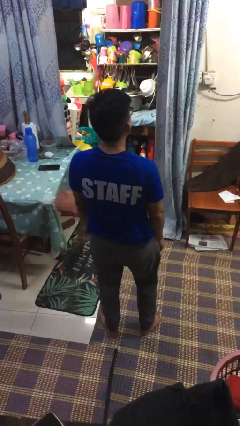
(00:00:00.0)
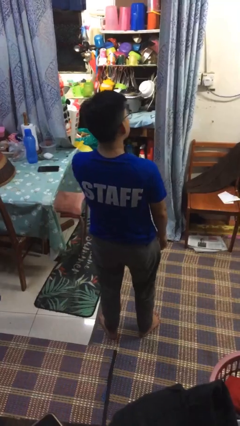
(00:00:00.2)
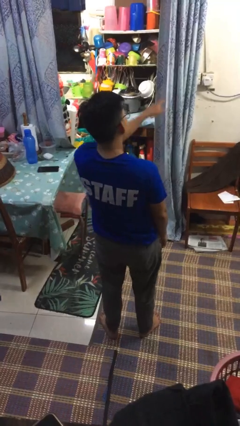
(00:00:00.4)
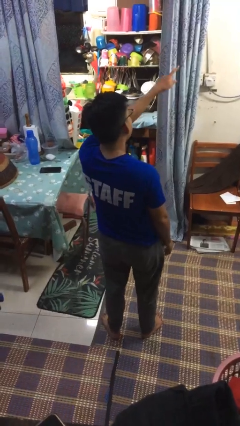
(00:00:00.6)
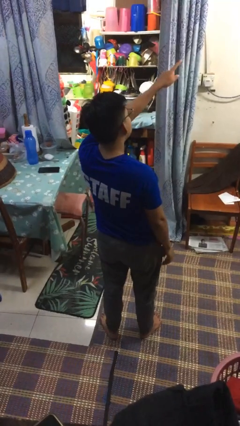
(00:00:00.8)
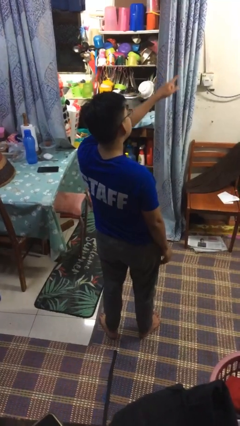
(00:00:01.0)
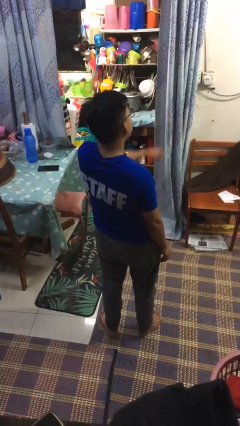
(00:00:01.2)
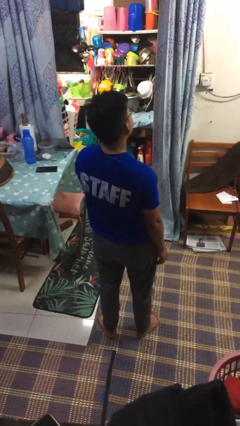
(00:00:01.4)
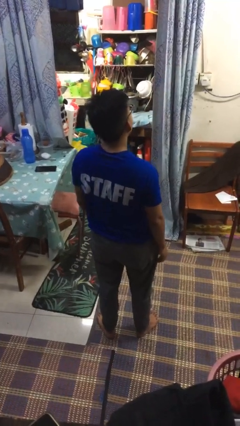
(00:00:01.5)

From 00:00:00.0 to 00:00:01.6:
person points at person

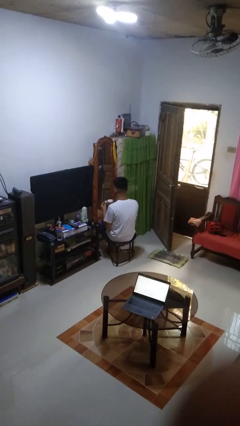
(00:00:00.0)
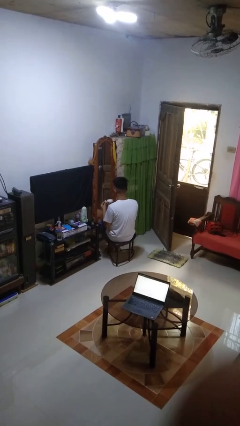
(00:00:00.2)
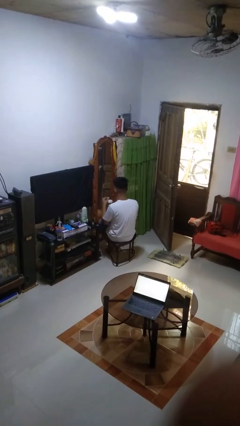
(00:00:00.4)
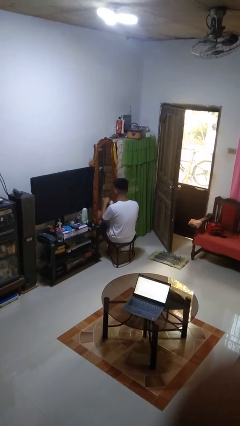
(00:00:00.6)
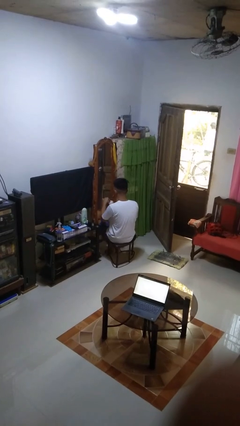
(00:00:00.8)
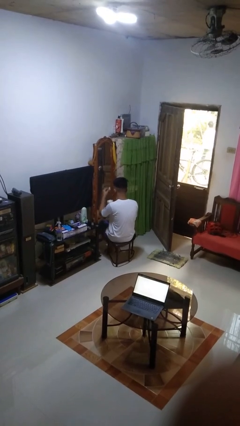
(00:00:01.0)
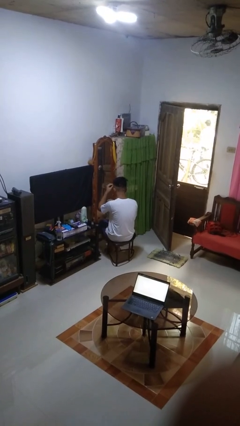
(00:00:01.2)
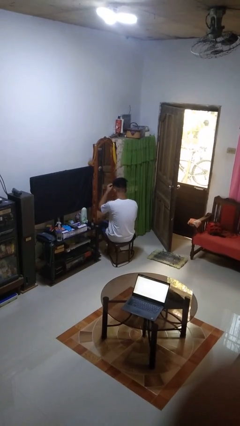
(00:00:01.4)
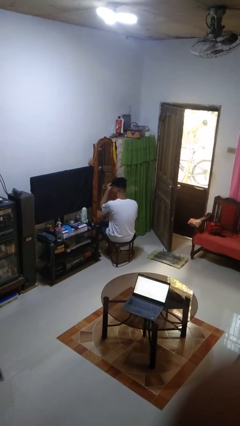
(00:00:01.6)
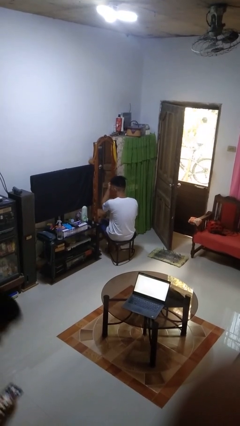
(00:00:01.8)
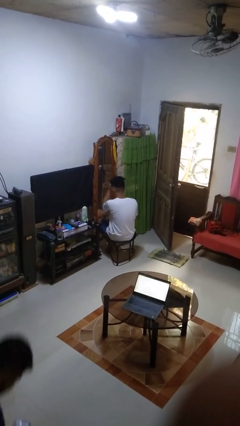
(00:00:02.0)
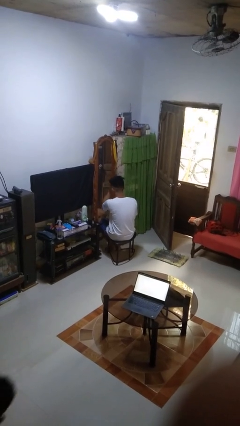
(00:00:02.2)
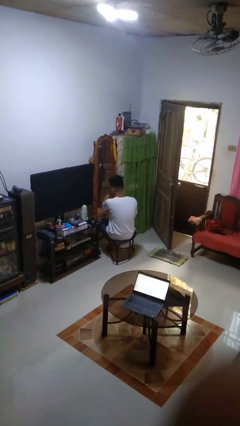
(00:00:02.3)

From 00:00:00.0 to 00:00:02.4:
person applies foundation makeup

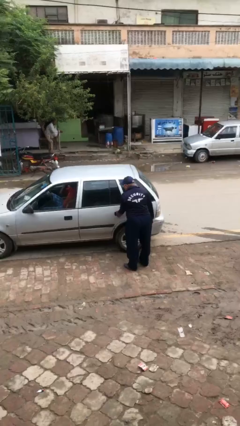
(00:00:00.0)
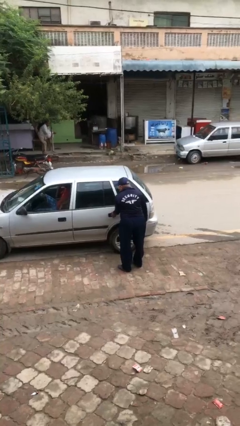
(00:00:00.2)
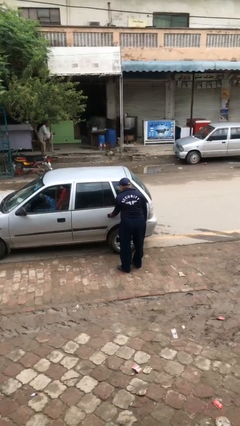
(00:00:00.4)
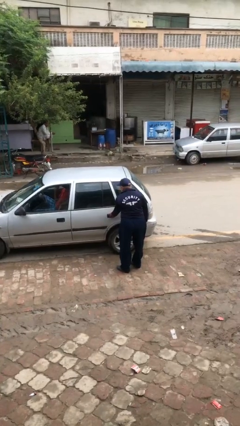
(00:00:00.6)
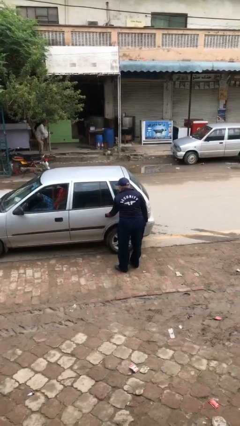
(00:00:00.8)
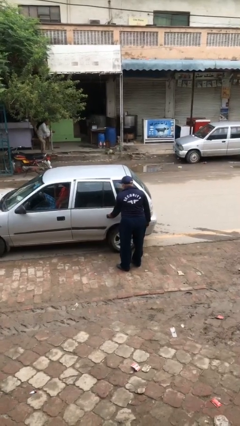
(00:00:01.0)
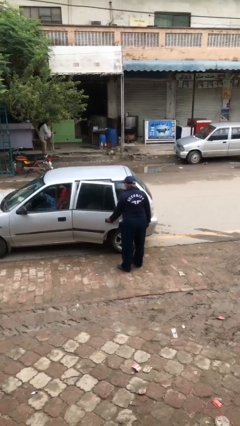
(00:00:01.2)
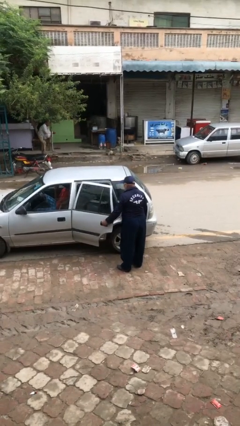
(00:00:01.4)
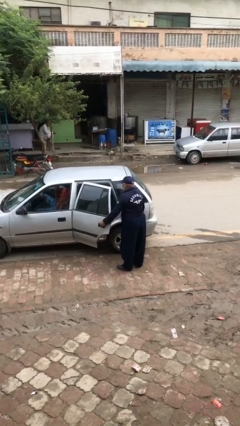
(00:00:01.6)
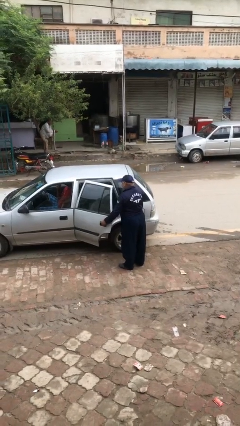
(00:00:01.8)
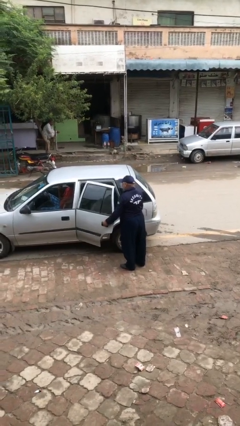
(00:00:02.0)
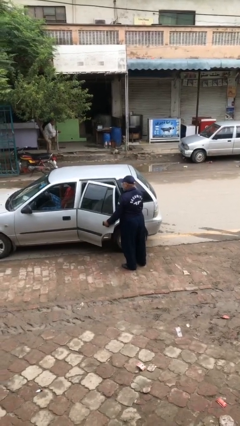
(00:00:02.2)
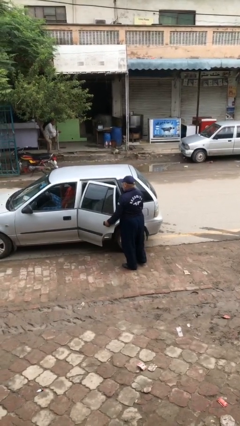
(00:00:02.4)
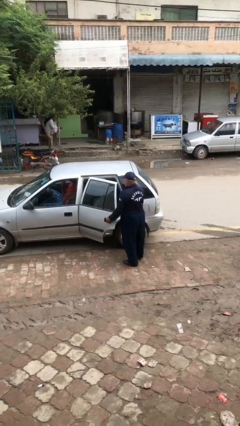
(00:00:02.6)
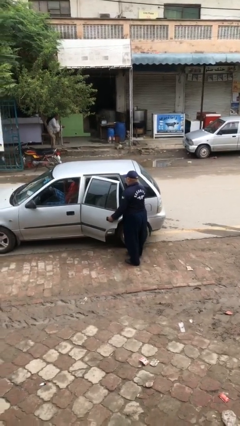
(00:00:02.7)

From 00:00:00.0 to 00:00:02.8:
person opens car door

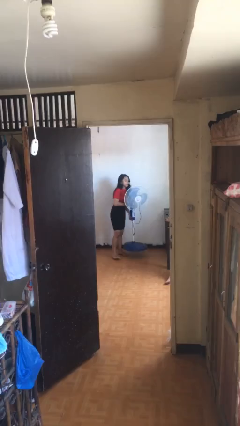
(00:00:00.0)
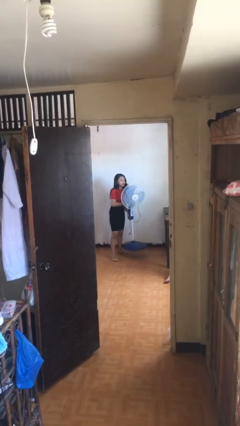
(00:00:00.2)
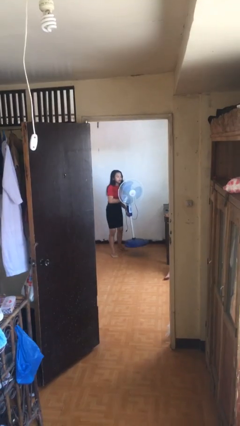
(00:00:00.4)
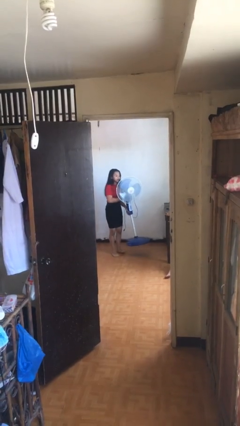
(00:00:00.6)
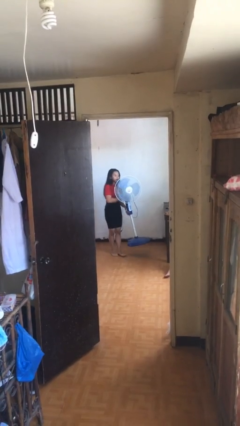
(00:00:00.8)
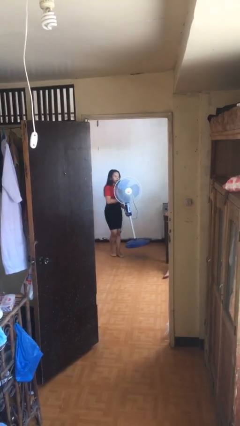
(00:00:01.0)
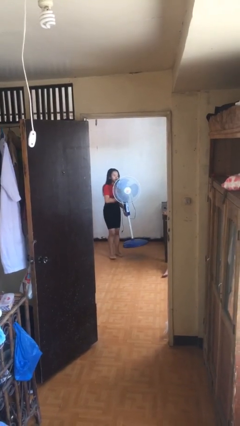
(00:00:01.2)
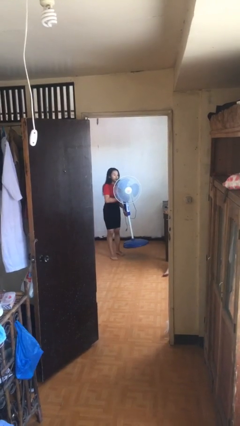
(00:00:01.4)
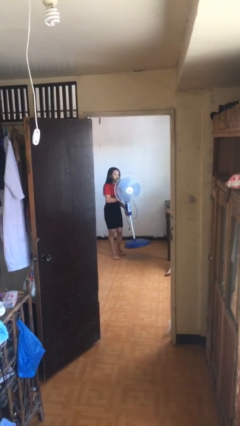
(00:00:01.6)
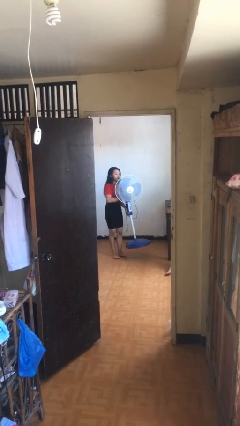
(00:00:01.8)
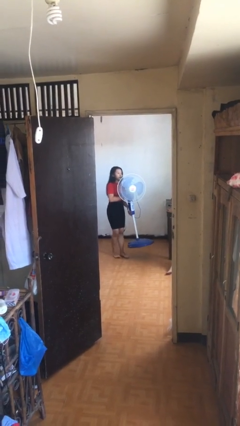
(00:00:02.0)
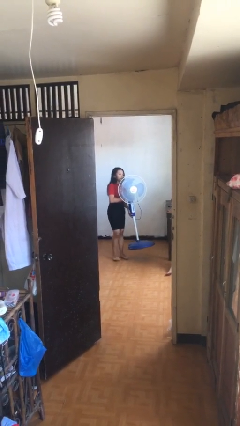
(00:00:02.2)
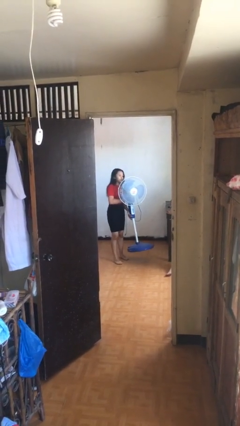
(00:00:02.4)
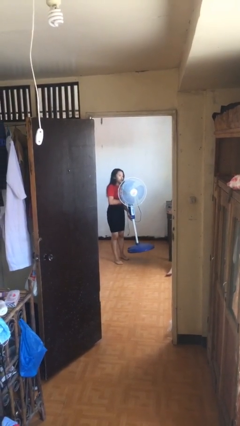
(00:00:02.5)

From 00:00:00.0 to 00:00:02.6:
person carries heavy object

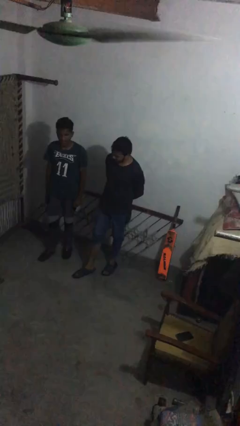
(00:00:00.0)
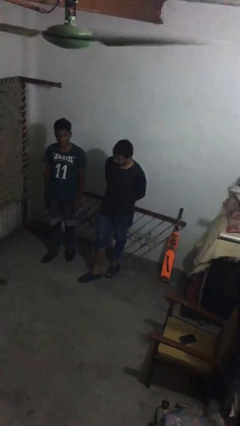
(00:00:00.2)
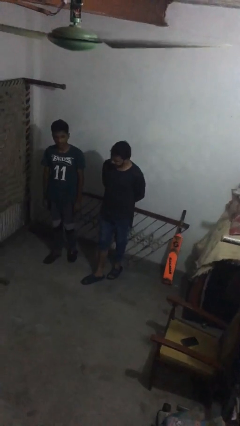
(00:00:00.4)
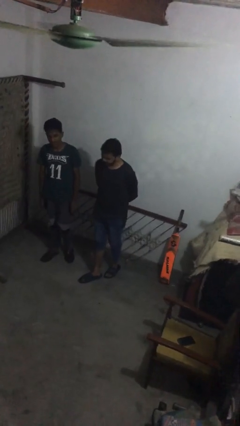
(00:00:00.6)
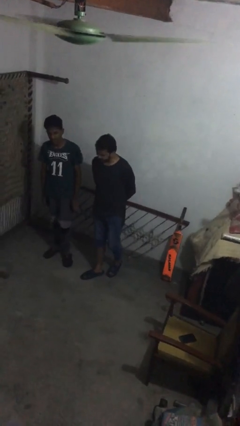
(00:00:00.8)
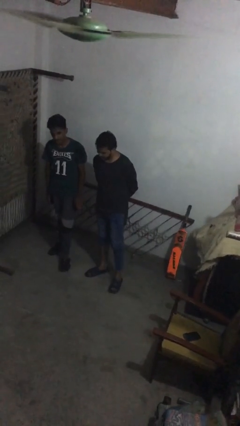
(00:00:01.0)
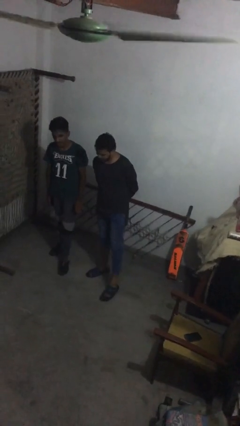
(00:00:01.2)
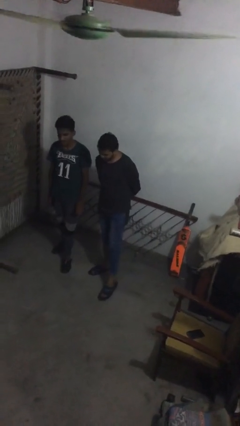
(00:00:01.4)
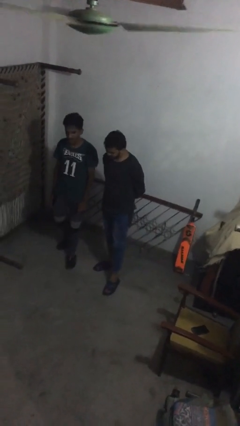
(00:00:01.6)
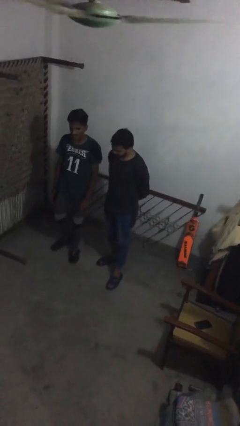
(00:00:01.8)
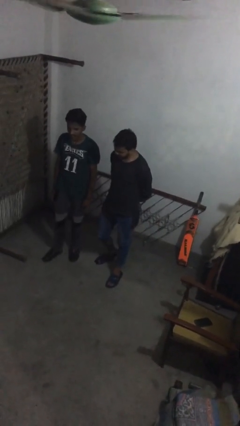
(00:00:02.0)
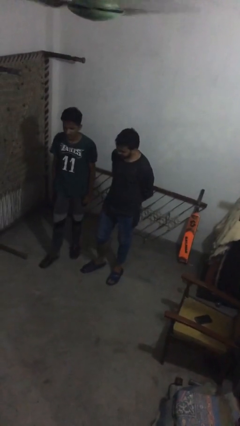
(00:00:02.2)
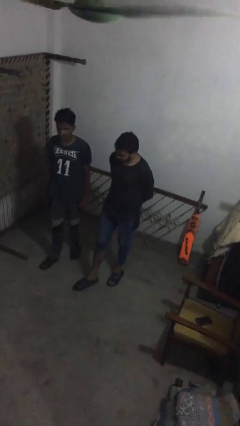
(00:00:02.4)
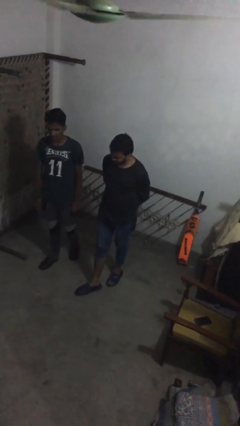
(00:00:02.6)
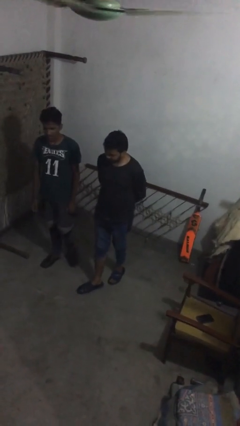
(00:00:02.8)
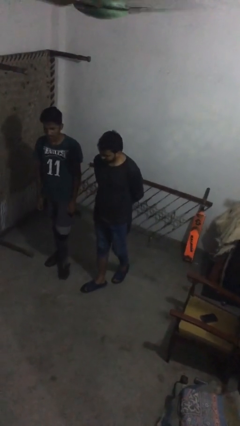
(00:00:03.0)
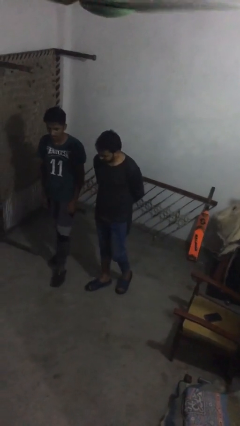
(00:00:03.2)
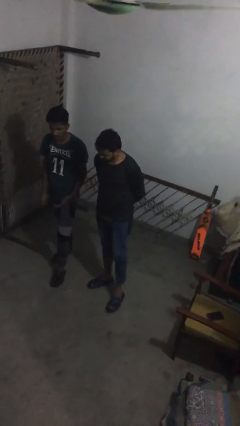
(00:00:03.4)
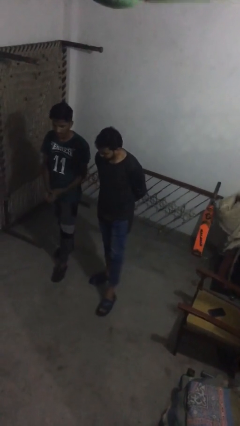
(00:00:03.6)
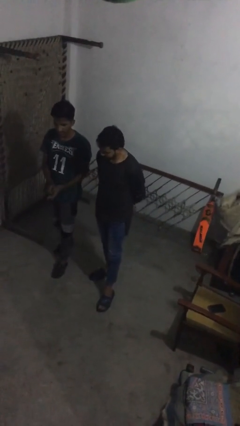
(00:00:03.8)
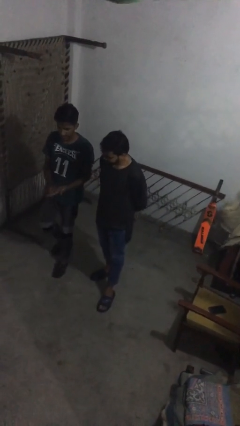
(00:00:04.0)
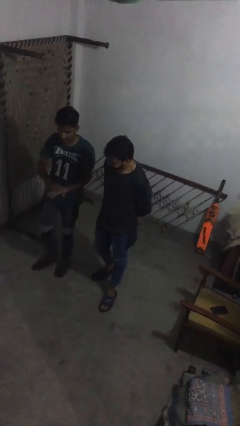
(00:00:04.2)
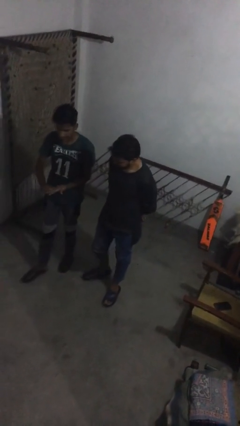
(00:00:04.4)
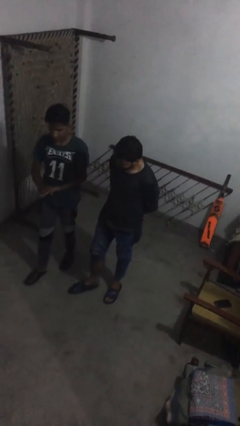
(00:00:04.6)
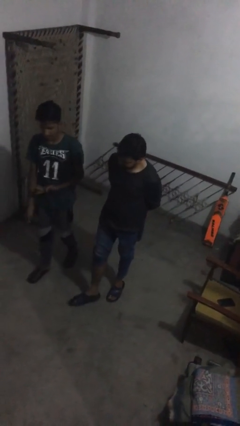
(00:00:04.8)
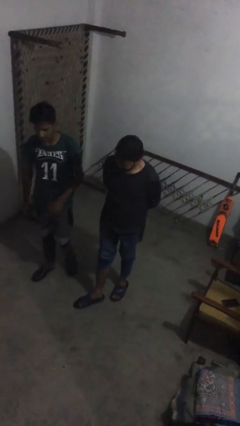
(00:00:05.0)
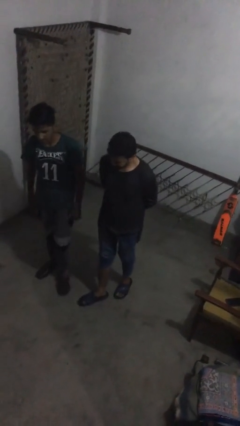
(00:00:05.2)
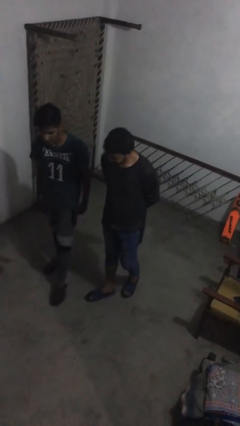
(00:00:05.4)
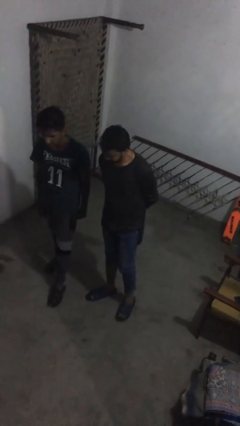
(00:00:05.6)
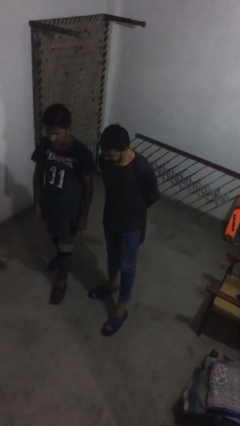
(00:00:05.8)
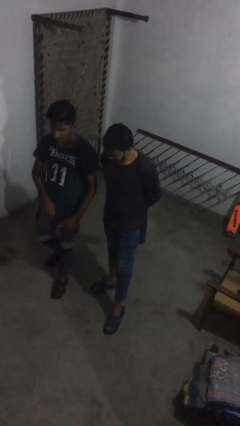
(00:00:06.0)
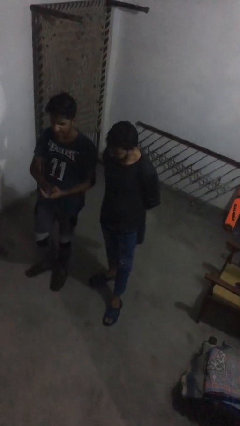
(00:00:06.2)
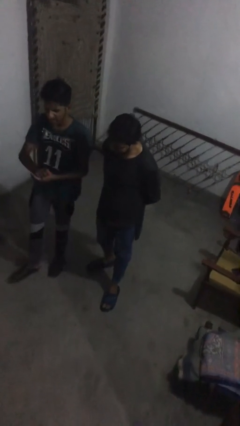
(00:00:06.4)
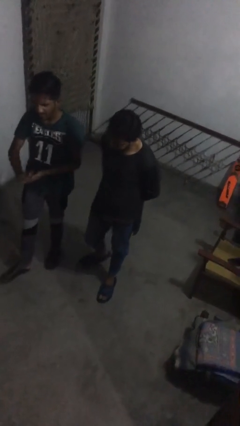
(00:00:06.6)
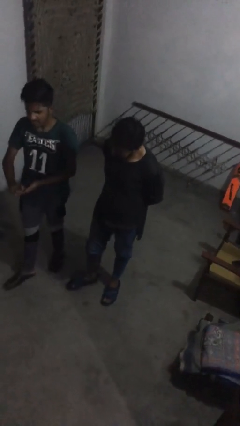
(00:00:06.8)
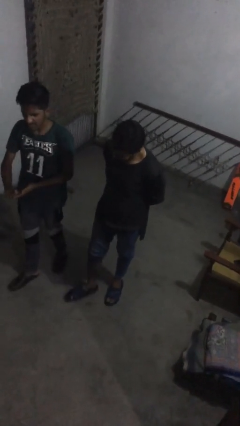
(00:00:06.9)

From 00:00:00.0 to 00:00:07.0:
person talks to person

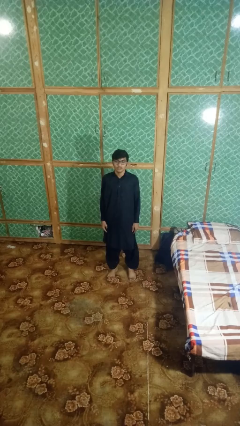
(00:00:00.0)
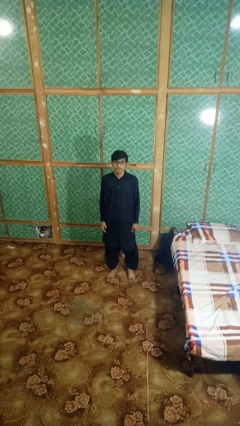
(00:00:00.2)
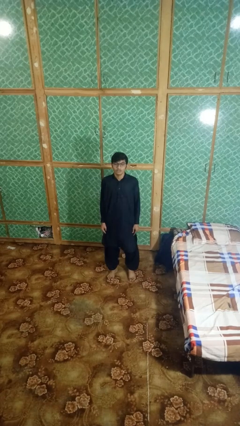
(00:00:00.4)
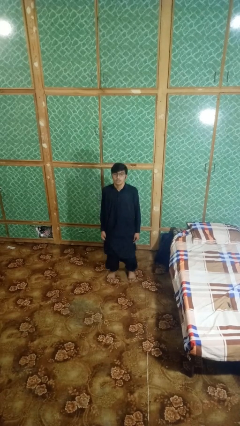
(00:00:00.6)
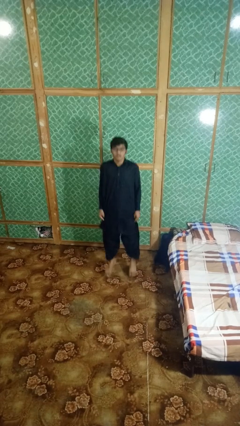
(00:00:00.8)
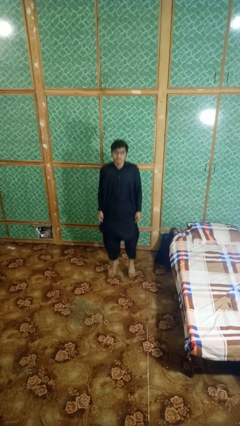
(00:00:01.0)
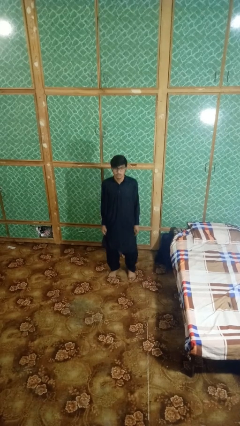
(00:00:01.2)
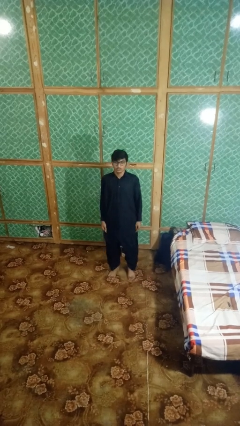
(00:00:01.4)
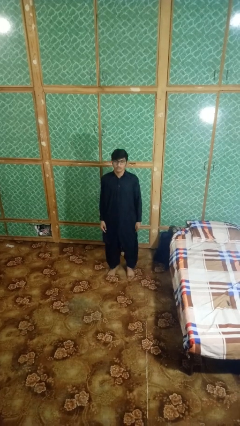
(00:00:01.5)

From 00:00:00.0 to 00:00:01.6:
person jumps
